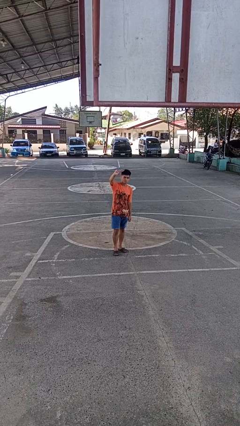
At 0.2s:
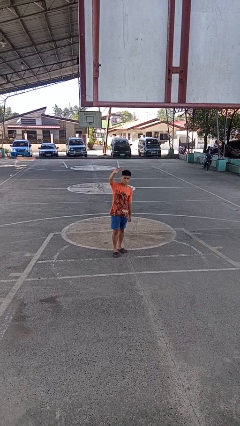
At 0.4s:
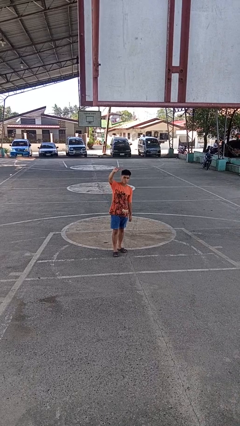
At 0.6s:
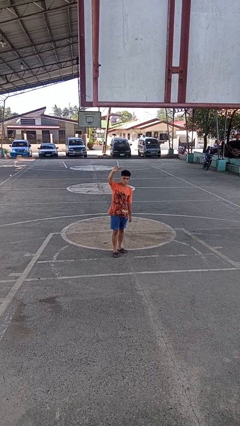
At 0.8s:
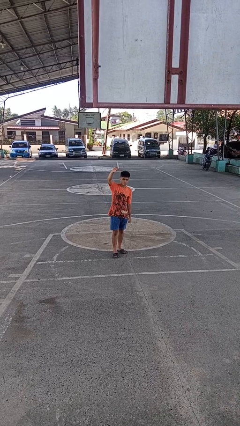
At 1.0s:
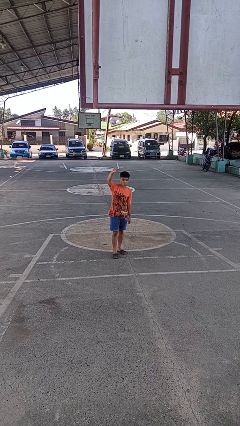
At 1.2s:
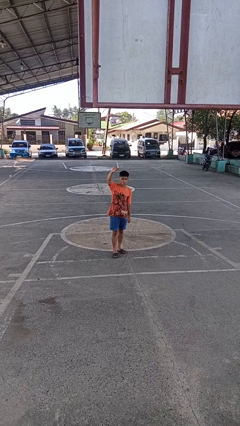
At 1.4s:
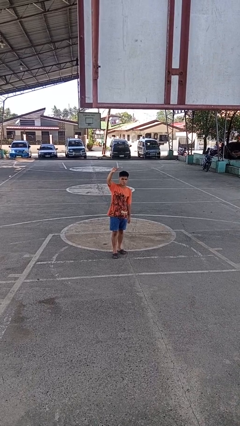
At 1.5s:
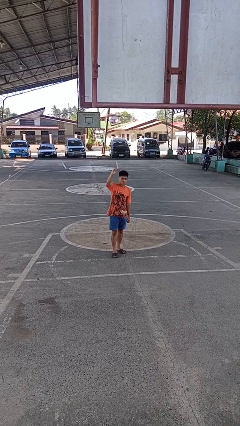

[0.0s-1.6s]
person gestures swipe up

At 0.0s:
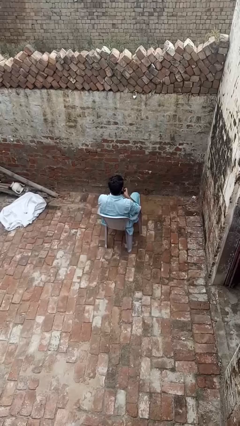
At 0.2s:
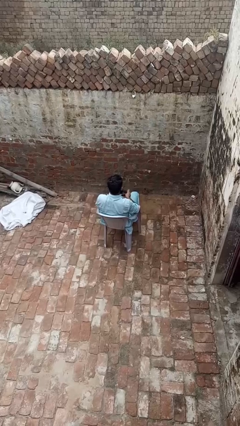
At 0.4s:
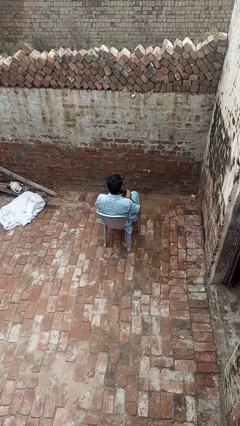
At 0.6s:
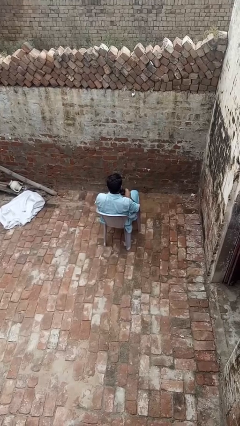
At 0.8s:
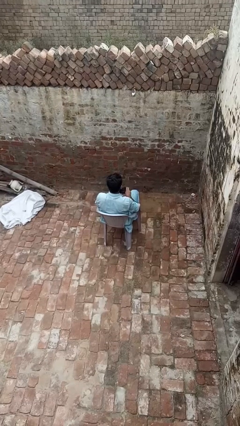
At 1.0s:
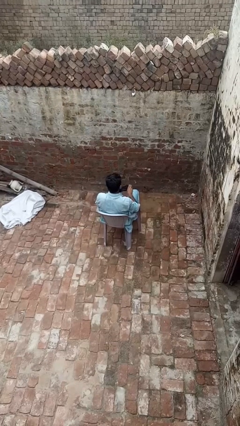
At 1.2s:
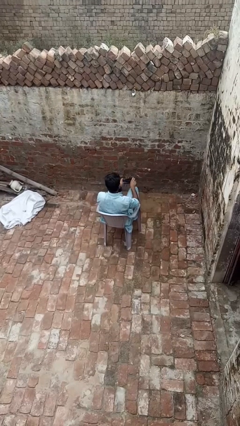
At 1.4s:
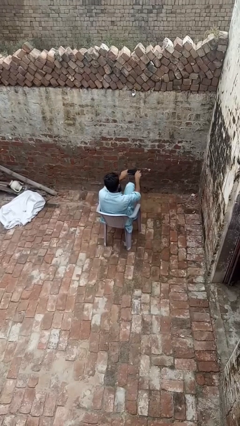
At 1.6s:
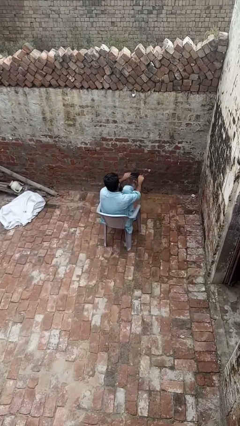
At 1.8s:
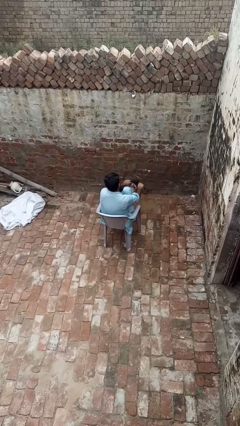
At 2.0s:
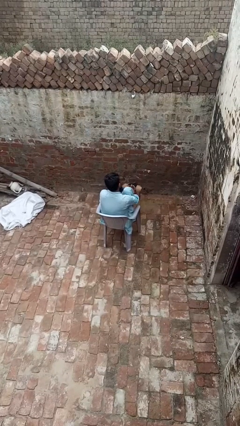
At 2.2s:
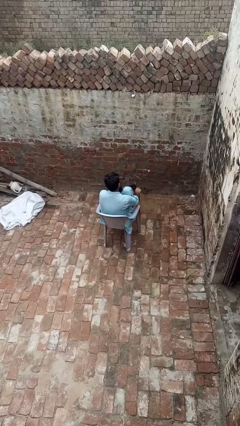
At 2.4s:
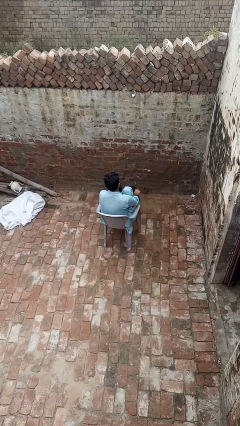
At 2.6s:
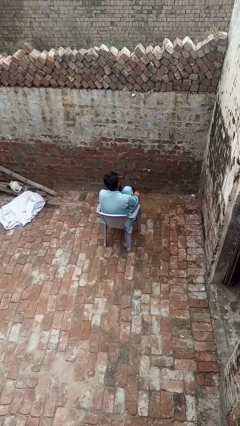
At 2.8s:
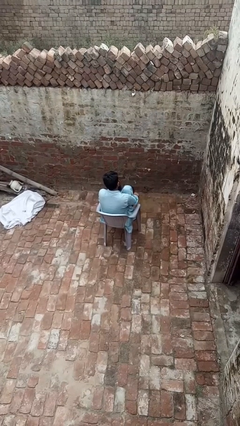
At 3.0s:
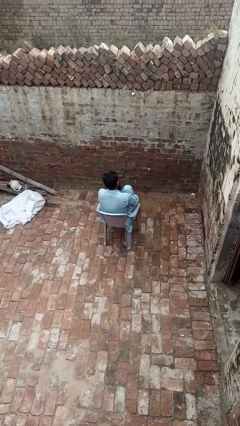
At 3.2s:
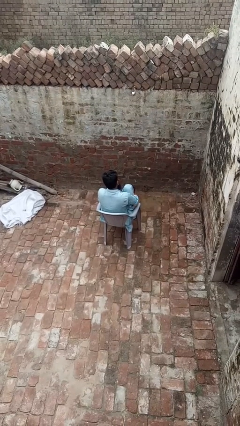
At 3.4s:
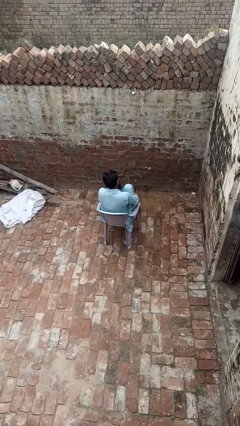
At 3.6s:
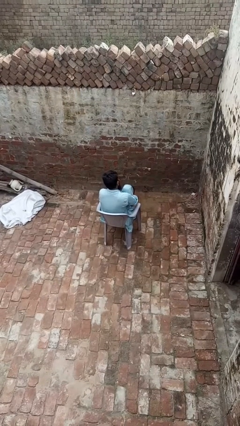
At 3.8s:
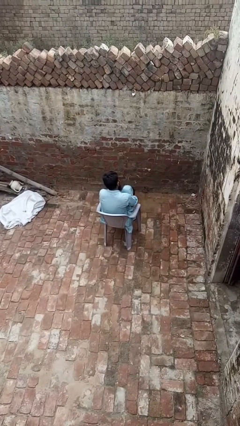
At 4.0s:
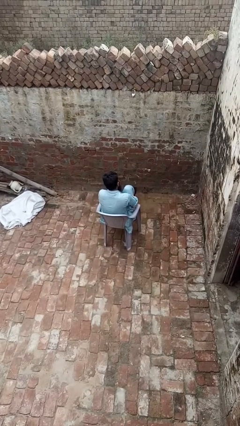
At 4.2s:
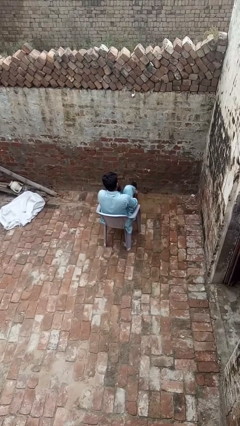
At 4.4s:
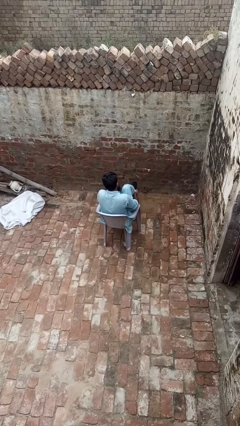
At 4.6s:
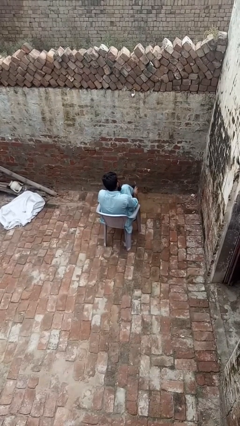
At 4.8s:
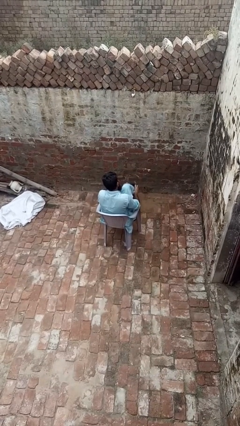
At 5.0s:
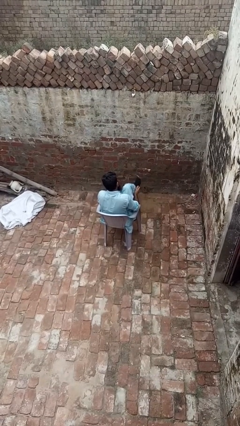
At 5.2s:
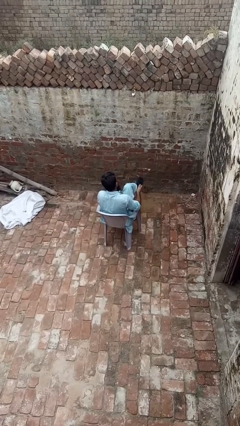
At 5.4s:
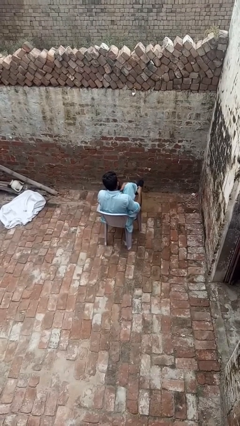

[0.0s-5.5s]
person puts on socks

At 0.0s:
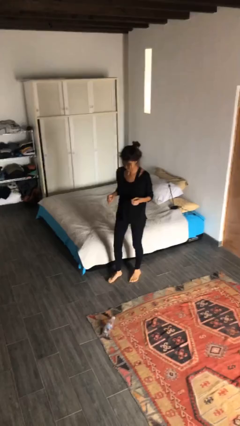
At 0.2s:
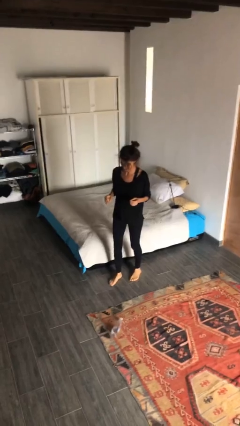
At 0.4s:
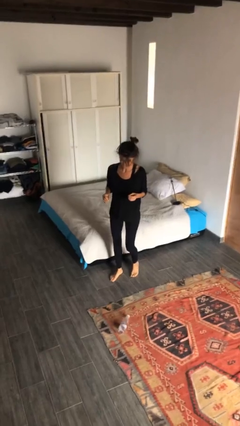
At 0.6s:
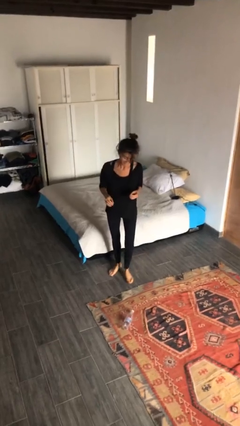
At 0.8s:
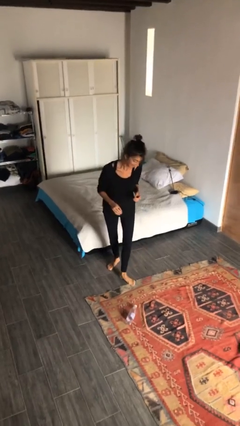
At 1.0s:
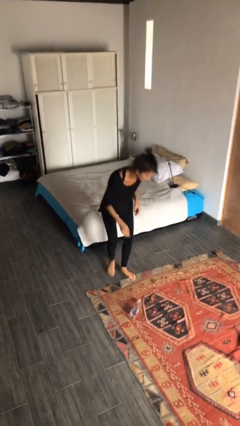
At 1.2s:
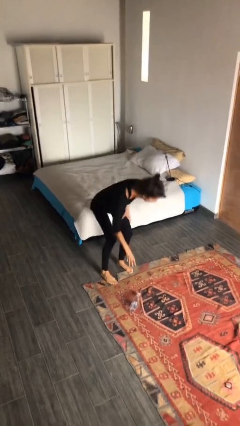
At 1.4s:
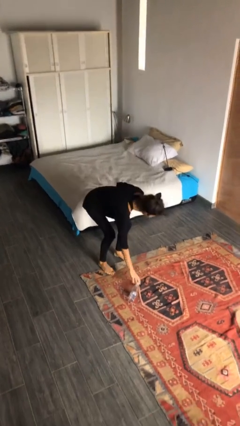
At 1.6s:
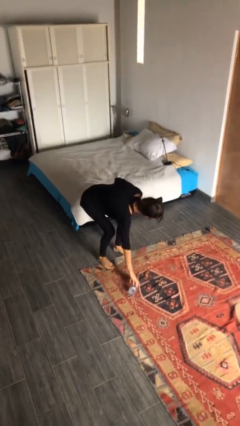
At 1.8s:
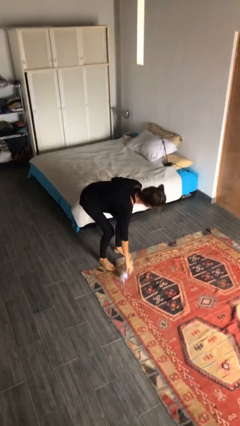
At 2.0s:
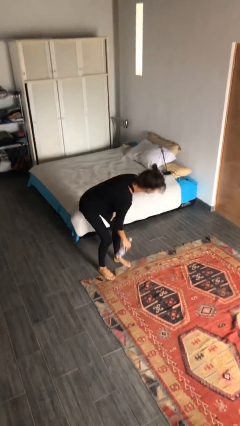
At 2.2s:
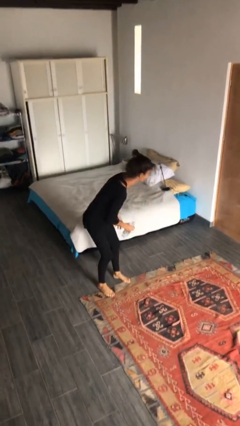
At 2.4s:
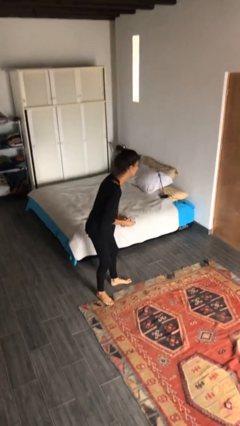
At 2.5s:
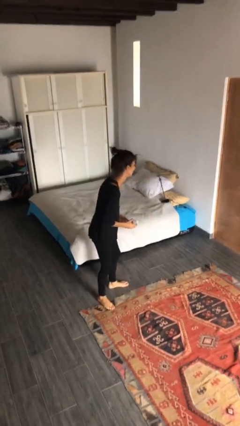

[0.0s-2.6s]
person picks up object from floor

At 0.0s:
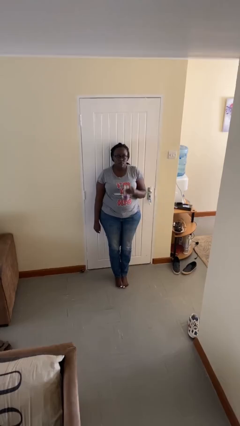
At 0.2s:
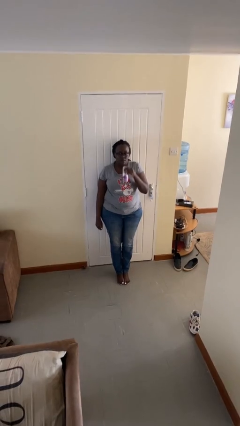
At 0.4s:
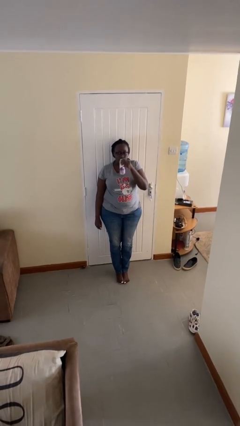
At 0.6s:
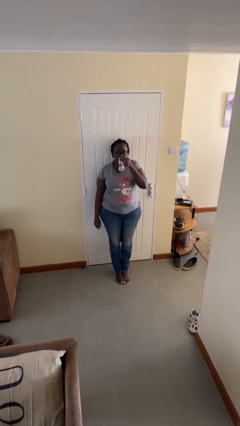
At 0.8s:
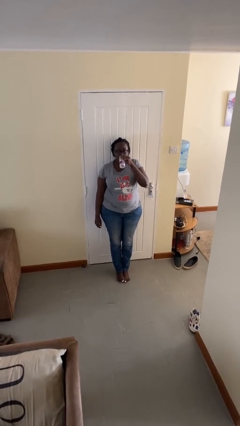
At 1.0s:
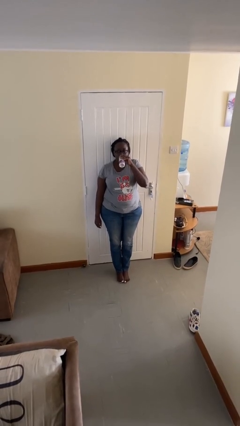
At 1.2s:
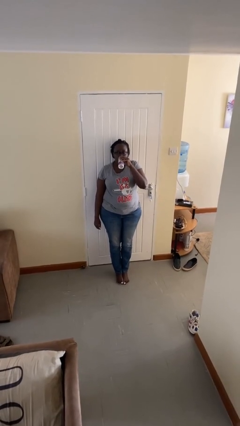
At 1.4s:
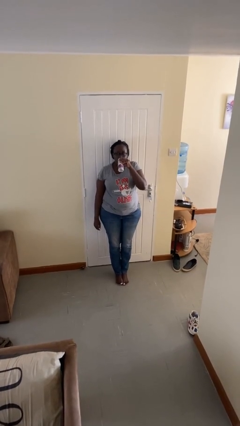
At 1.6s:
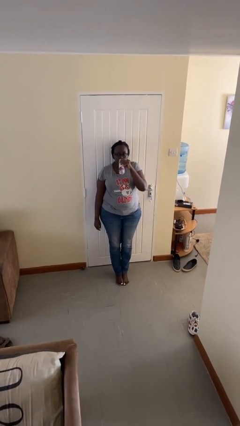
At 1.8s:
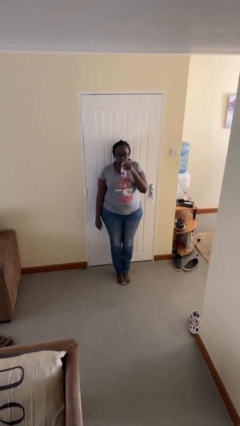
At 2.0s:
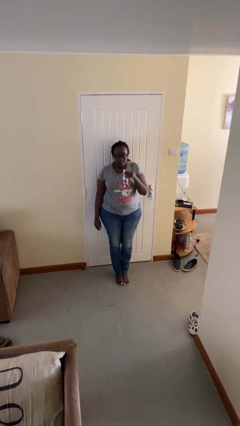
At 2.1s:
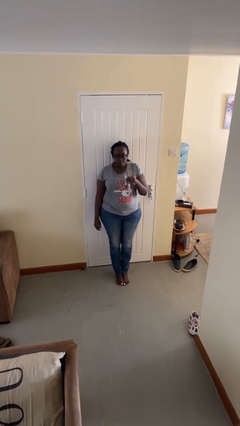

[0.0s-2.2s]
person drinks from beverage can

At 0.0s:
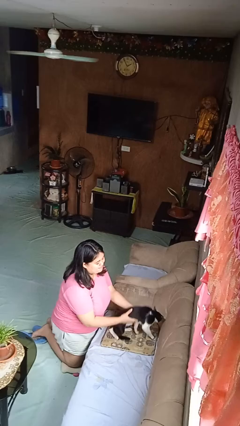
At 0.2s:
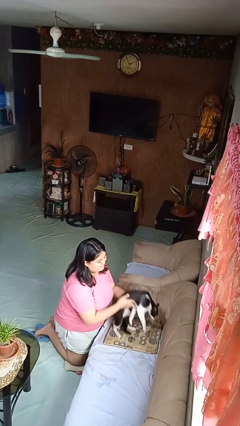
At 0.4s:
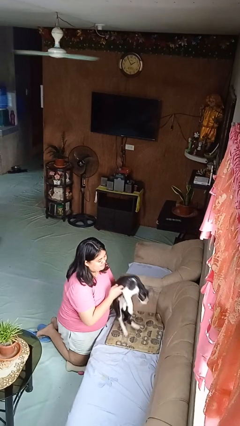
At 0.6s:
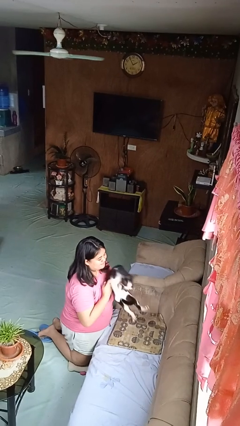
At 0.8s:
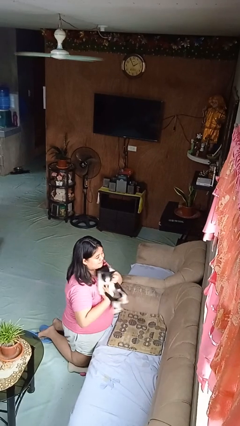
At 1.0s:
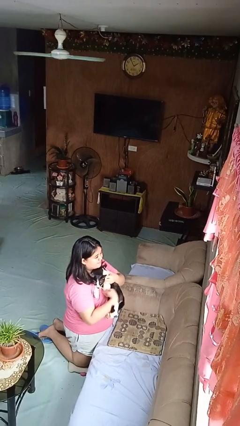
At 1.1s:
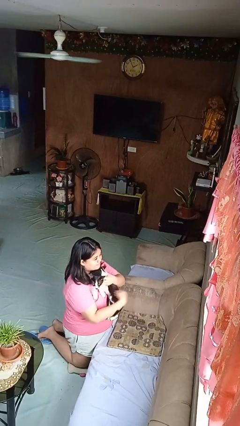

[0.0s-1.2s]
person hugs cat

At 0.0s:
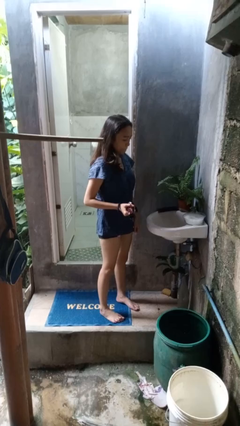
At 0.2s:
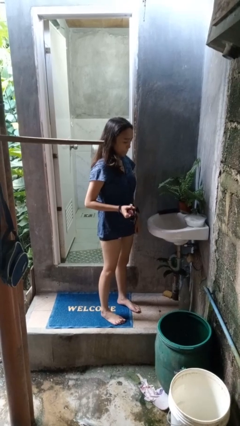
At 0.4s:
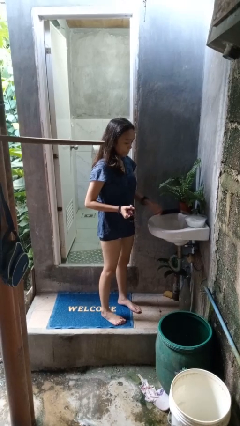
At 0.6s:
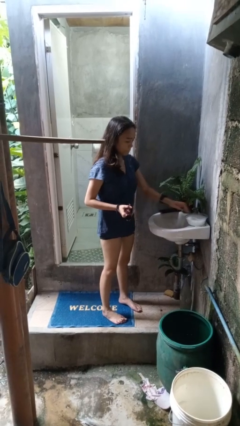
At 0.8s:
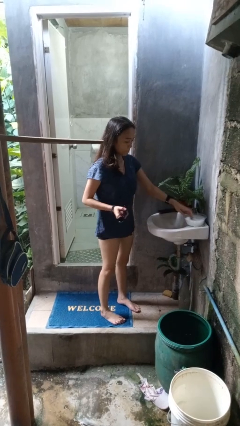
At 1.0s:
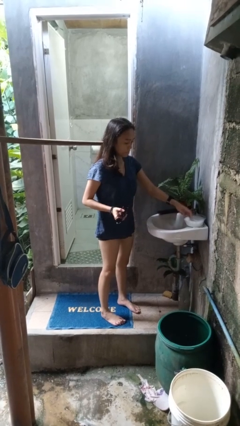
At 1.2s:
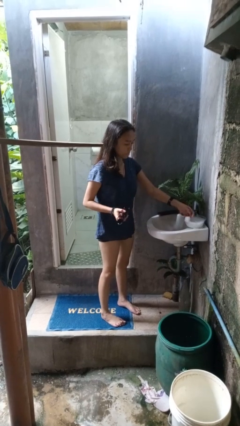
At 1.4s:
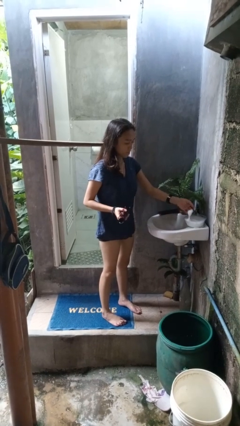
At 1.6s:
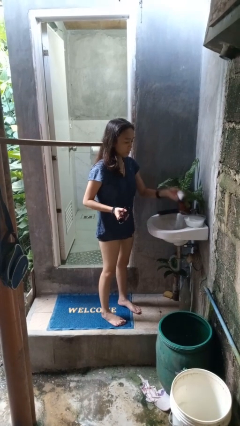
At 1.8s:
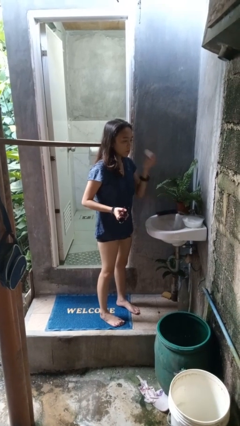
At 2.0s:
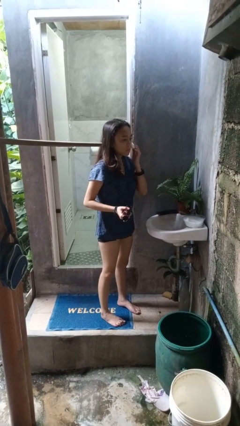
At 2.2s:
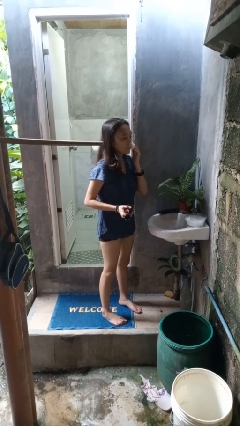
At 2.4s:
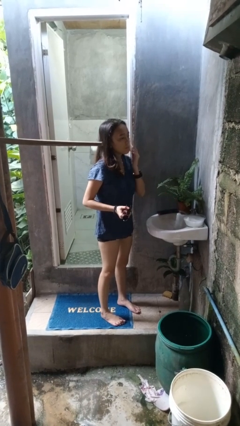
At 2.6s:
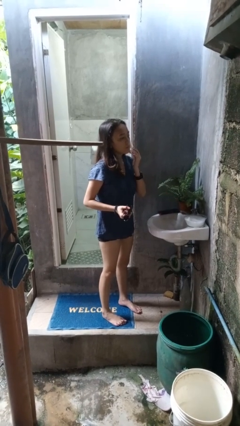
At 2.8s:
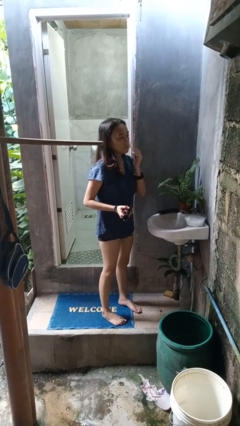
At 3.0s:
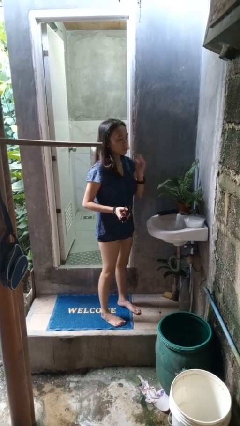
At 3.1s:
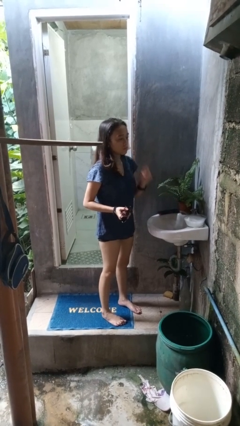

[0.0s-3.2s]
person applies shaving cream

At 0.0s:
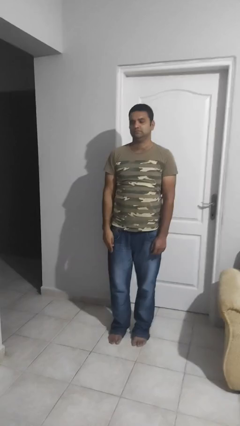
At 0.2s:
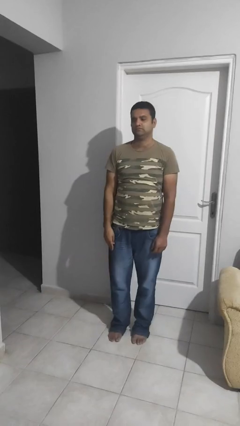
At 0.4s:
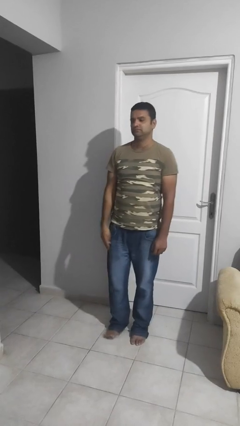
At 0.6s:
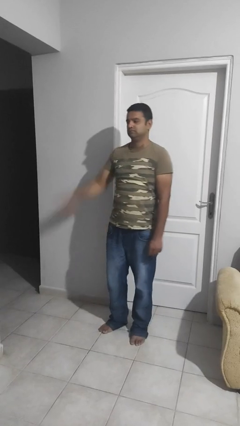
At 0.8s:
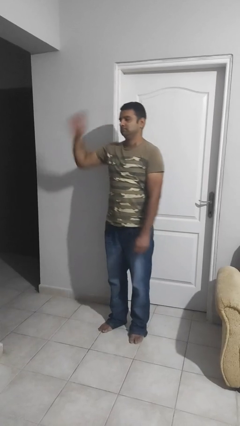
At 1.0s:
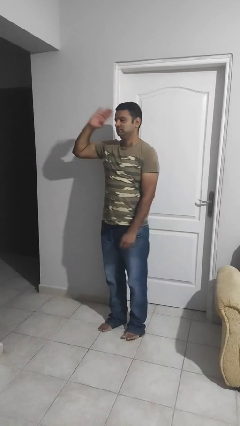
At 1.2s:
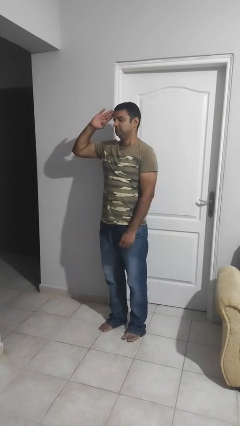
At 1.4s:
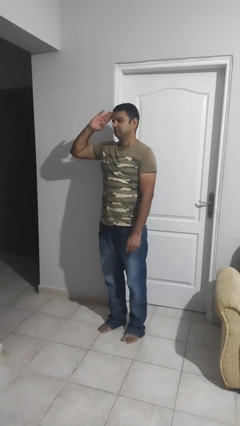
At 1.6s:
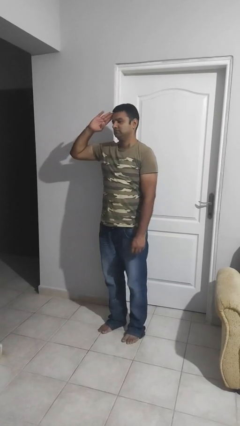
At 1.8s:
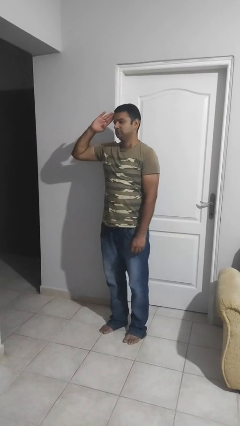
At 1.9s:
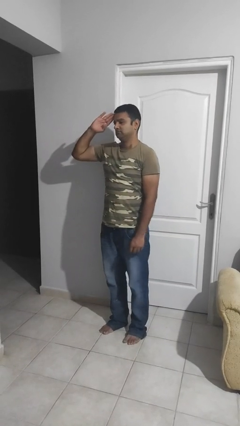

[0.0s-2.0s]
person salutes
